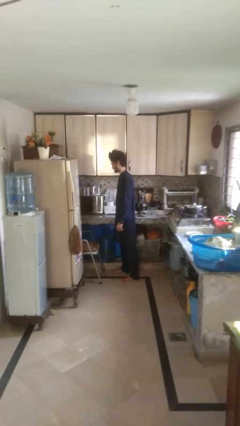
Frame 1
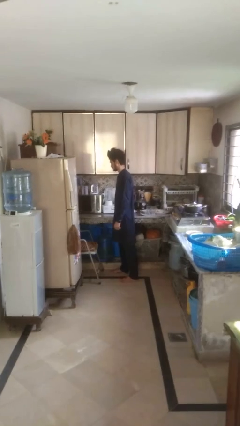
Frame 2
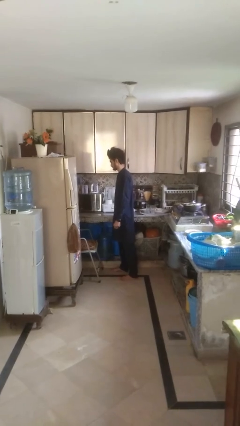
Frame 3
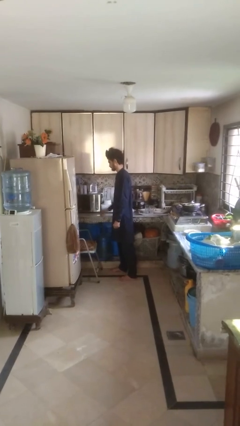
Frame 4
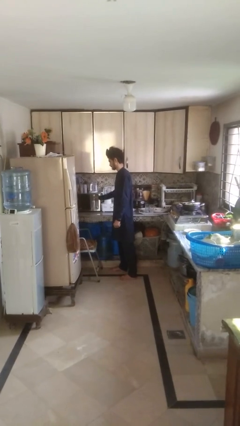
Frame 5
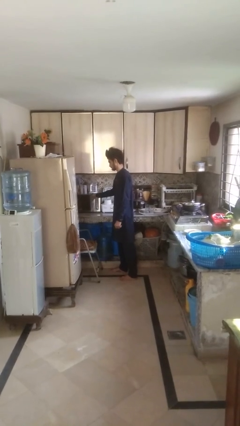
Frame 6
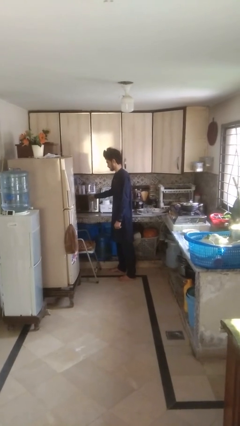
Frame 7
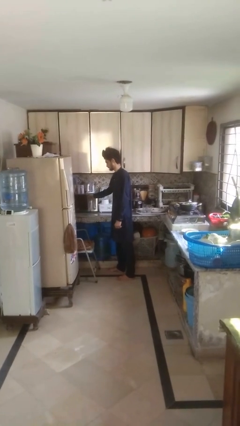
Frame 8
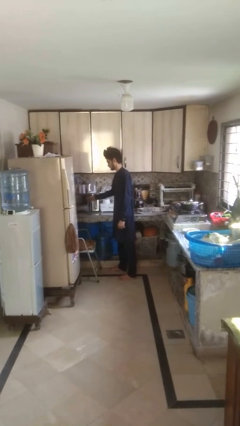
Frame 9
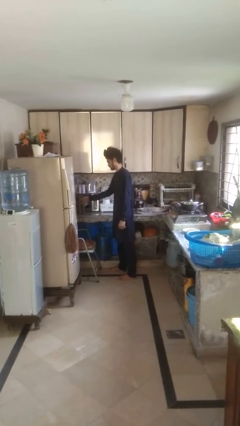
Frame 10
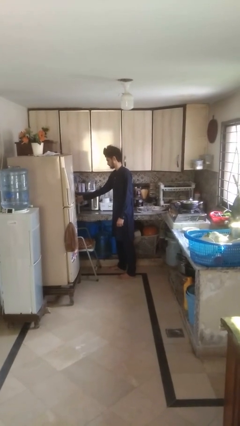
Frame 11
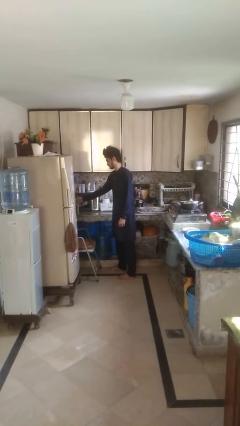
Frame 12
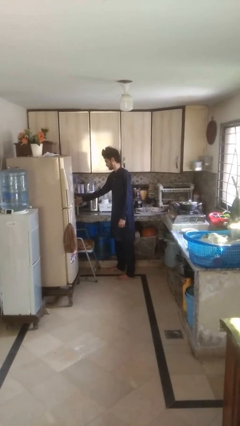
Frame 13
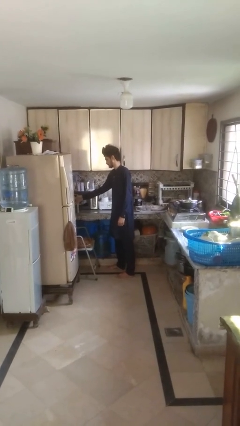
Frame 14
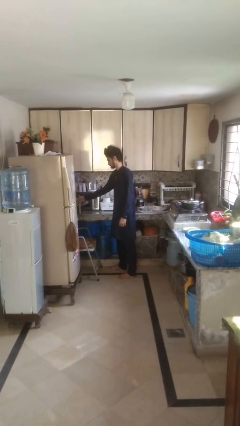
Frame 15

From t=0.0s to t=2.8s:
person opens oven door

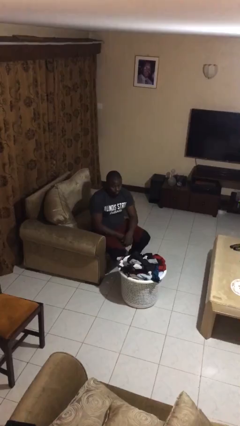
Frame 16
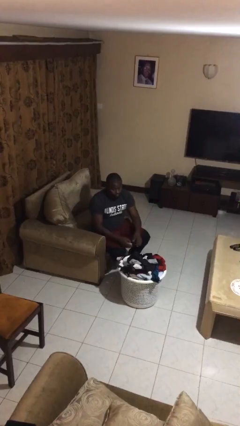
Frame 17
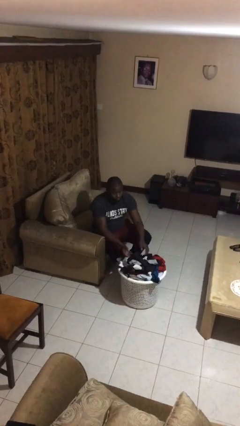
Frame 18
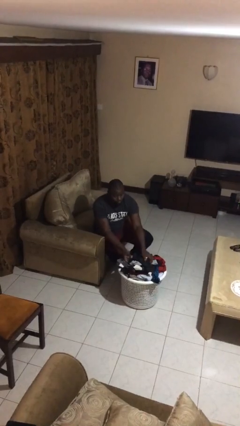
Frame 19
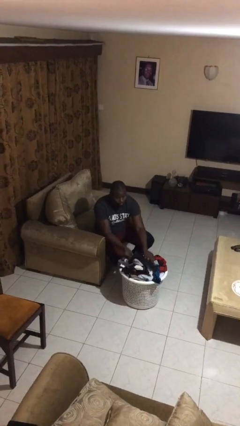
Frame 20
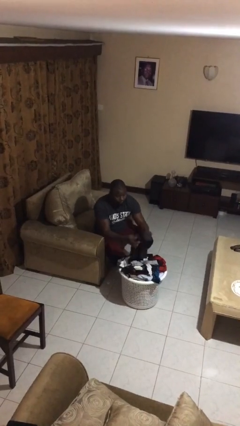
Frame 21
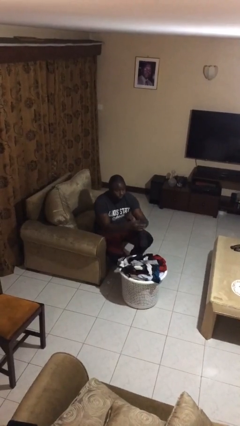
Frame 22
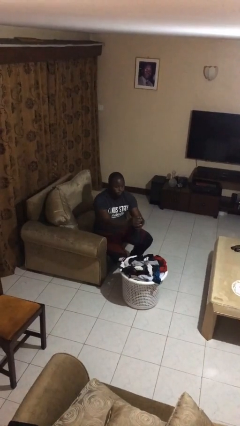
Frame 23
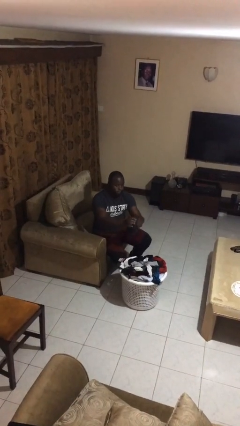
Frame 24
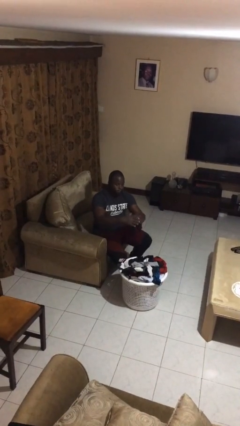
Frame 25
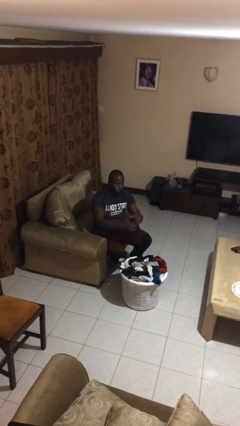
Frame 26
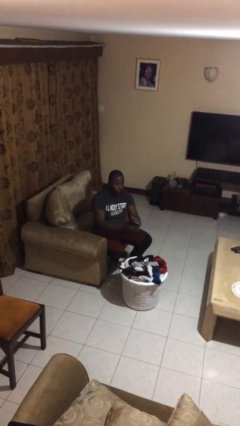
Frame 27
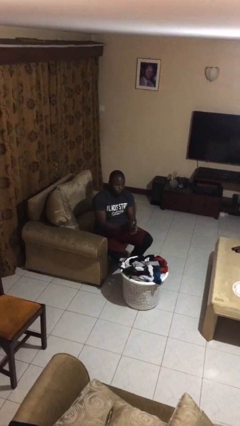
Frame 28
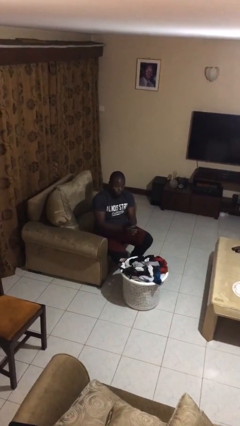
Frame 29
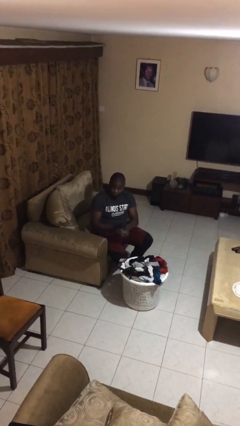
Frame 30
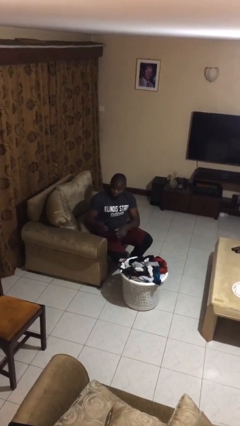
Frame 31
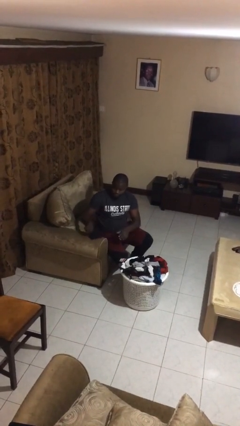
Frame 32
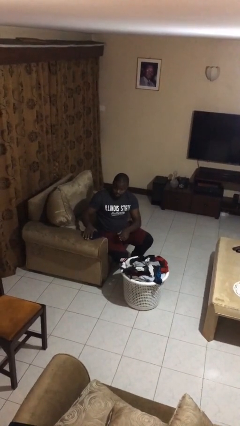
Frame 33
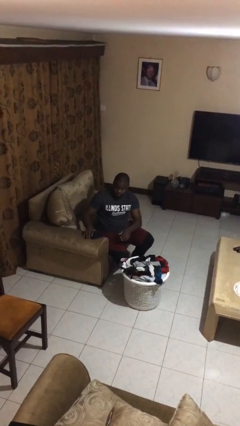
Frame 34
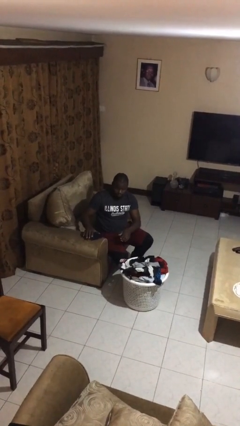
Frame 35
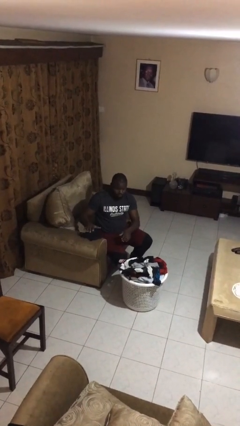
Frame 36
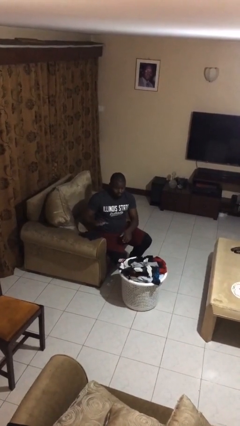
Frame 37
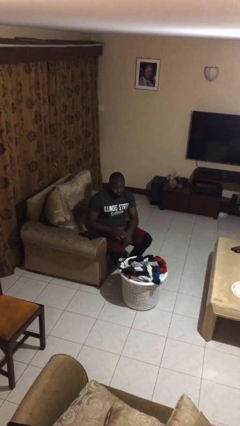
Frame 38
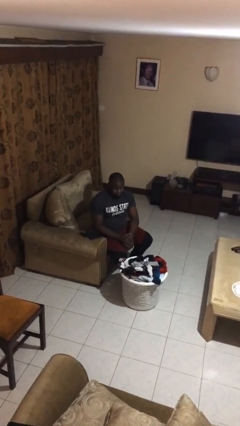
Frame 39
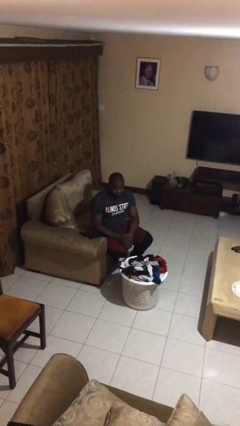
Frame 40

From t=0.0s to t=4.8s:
person folds socks

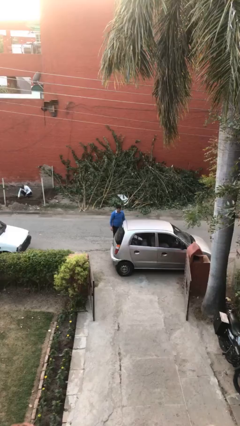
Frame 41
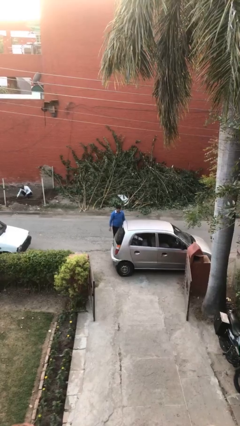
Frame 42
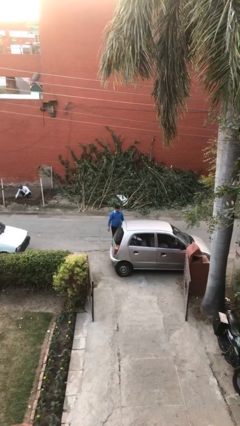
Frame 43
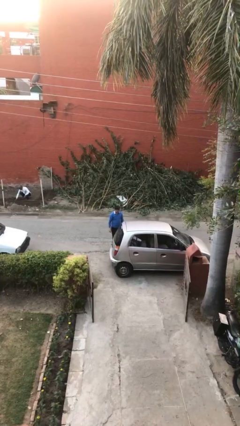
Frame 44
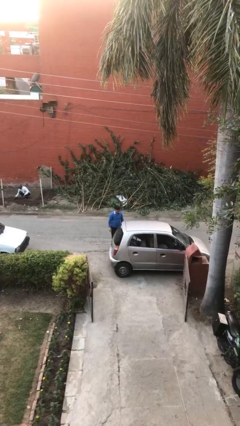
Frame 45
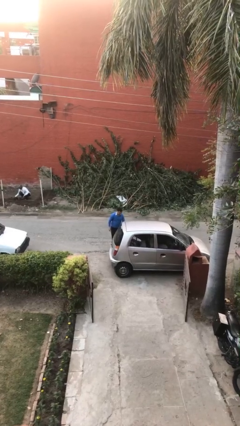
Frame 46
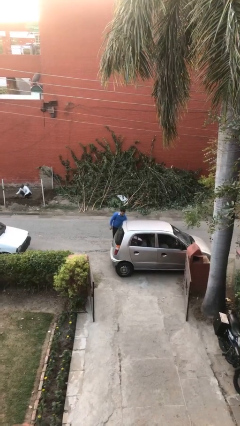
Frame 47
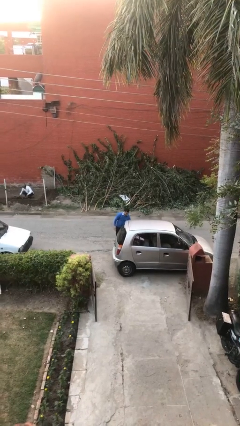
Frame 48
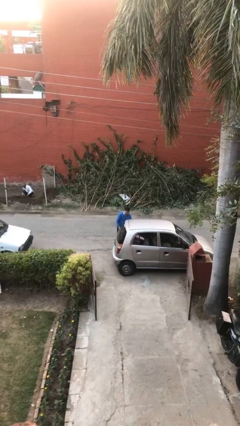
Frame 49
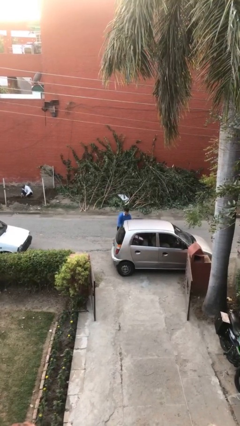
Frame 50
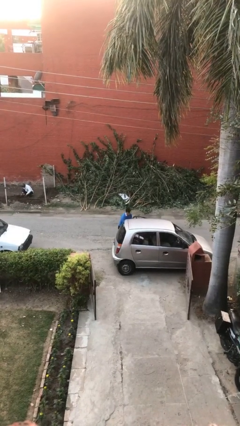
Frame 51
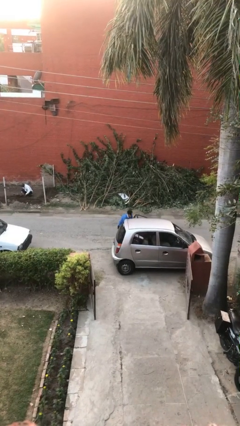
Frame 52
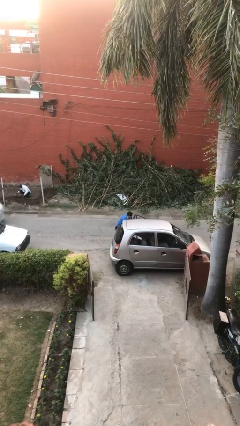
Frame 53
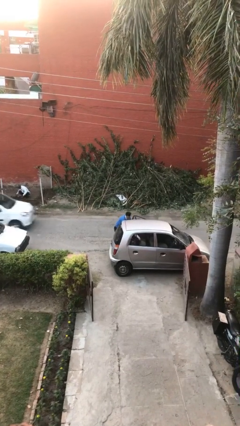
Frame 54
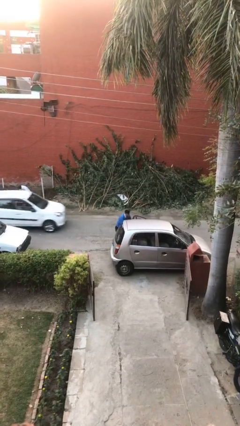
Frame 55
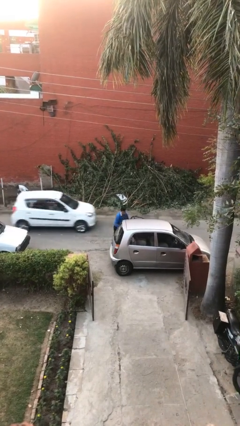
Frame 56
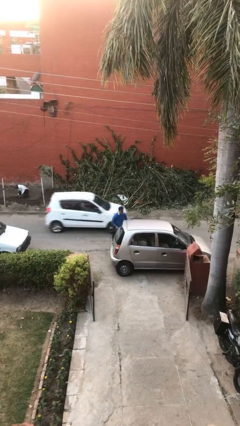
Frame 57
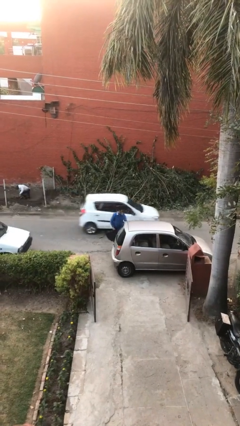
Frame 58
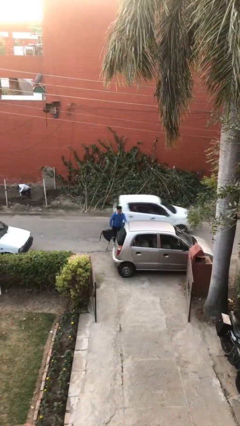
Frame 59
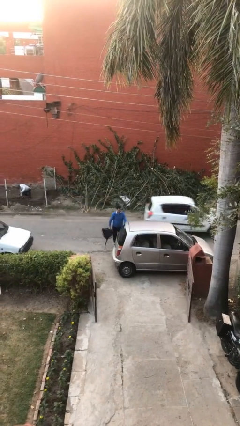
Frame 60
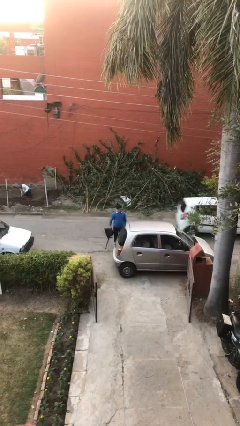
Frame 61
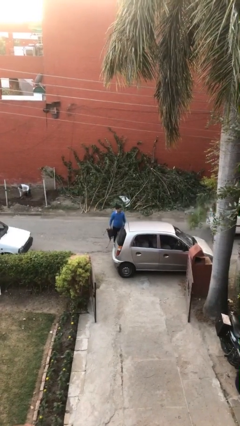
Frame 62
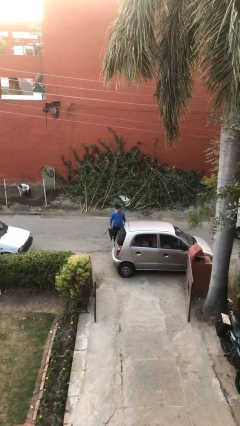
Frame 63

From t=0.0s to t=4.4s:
person unloads car

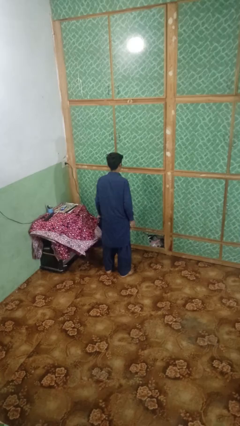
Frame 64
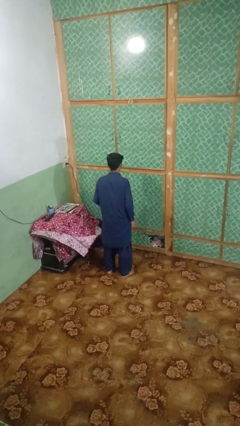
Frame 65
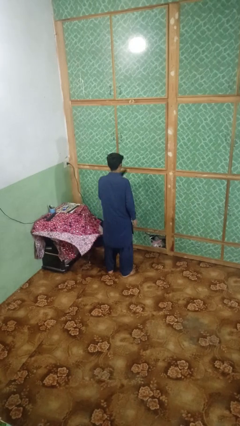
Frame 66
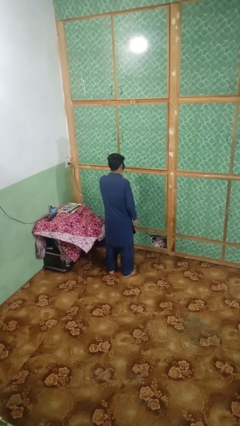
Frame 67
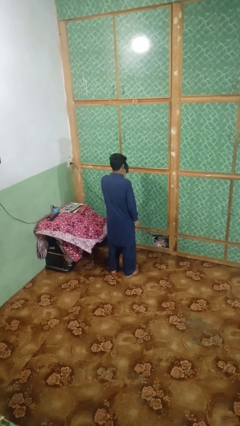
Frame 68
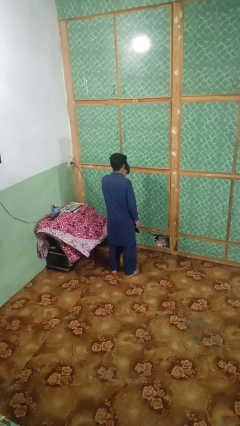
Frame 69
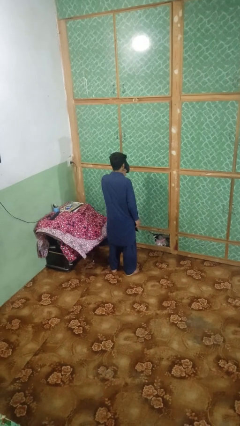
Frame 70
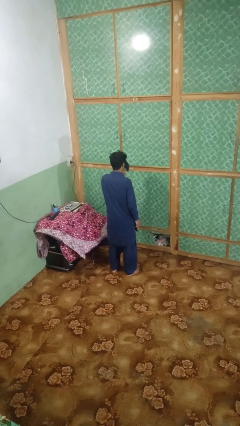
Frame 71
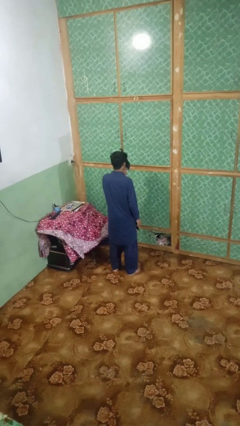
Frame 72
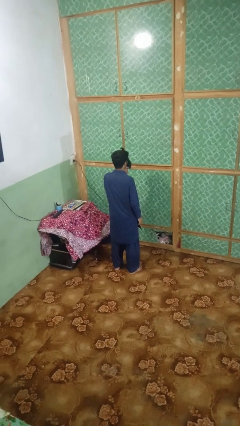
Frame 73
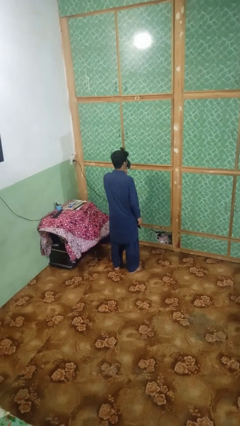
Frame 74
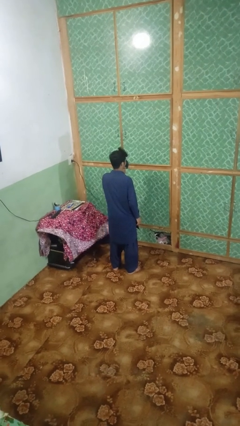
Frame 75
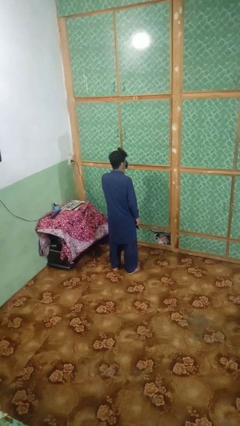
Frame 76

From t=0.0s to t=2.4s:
person dries hair with hairdryer

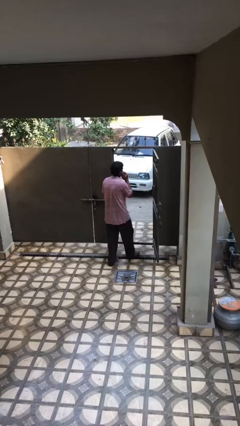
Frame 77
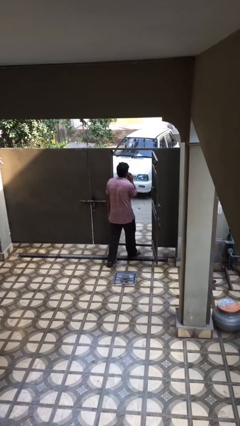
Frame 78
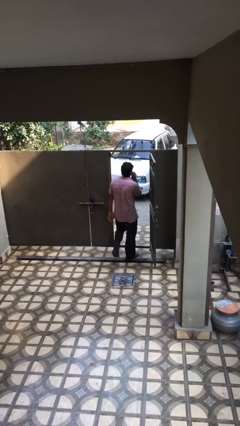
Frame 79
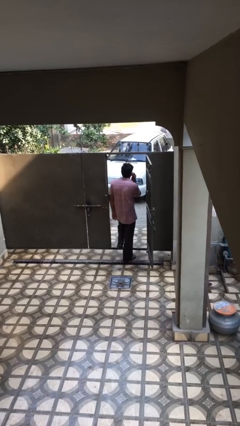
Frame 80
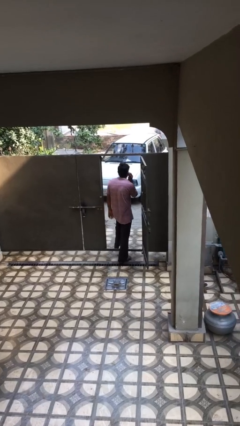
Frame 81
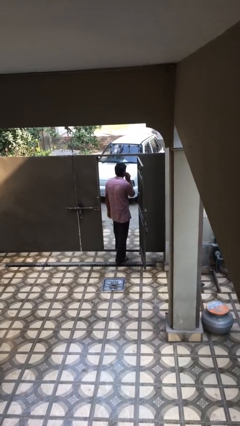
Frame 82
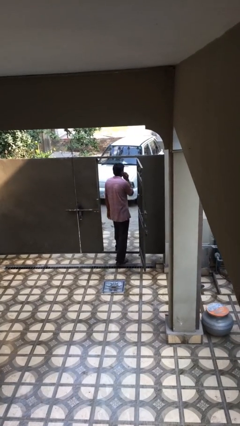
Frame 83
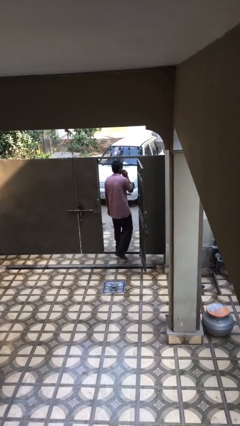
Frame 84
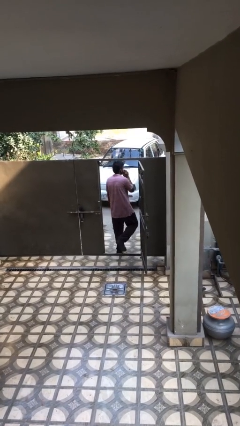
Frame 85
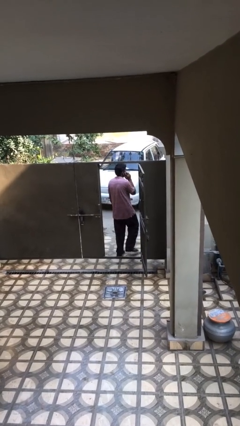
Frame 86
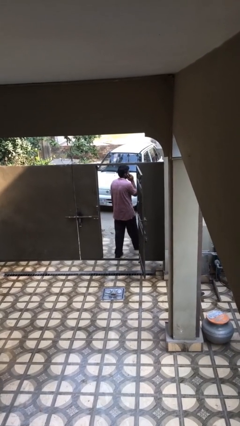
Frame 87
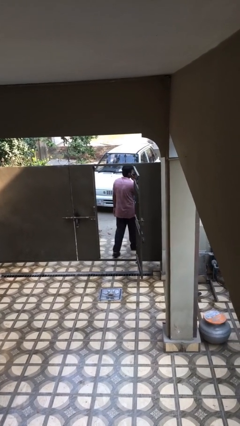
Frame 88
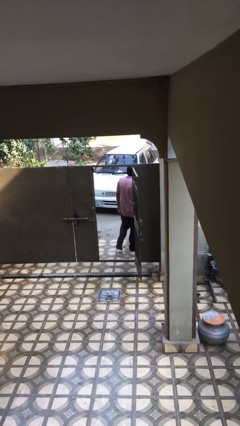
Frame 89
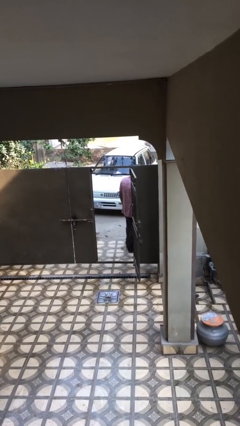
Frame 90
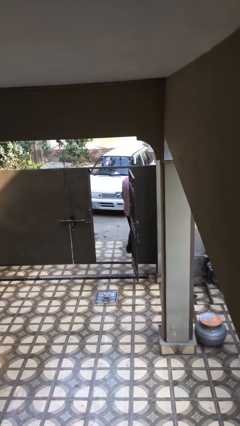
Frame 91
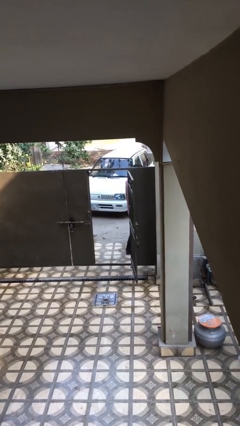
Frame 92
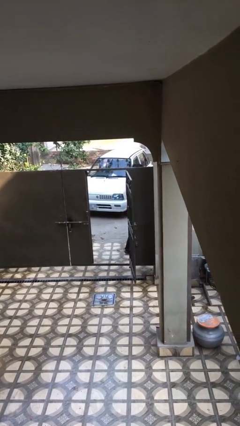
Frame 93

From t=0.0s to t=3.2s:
person exits scene through structure
